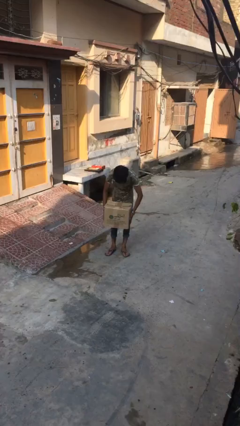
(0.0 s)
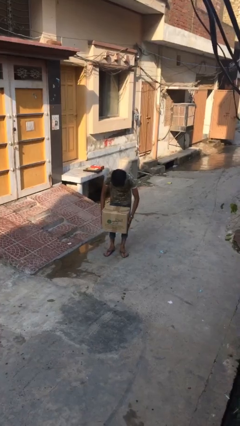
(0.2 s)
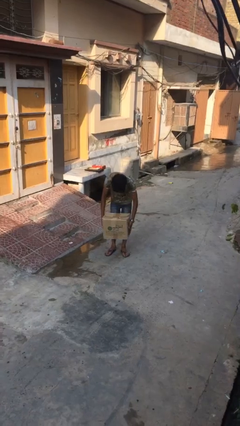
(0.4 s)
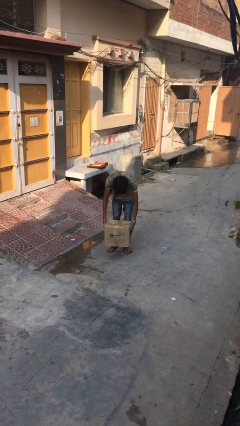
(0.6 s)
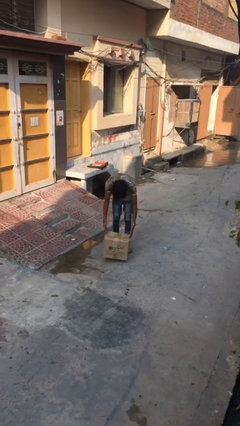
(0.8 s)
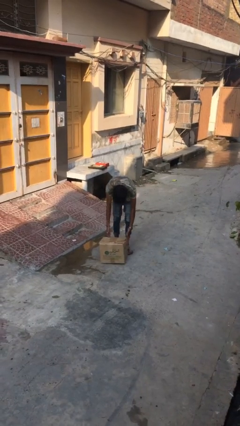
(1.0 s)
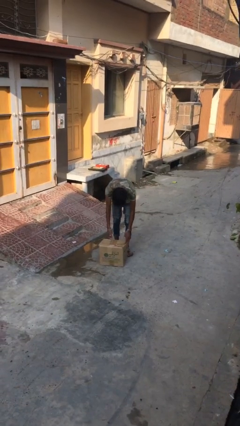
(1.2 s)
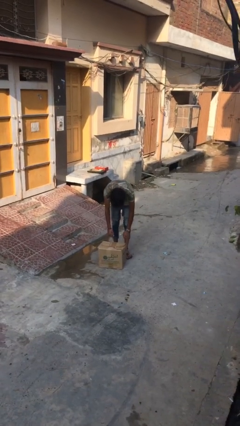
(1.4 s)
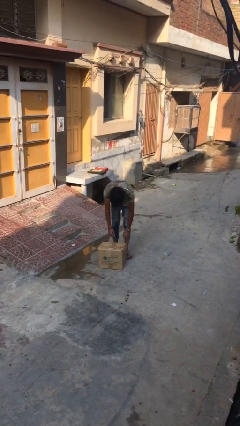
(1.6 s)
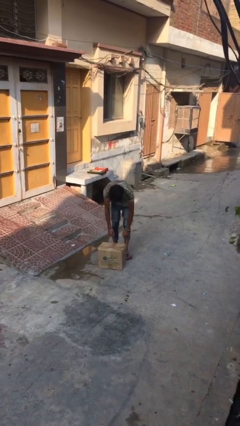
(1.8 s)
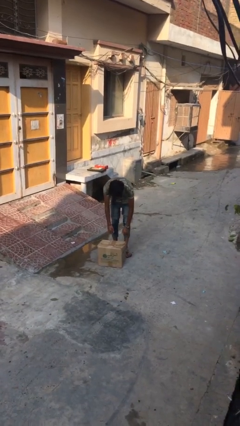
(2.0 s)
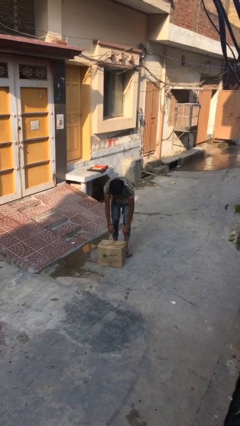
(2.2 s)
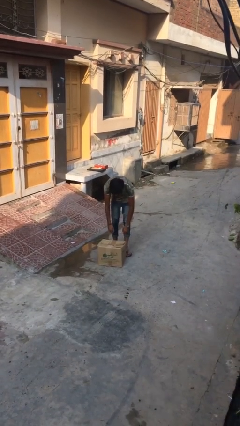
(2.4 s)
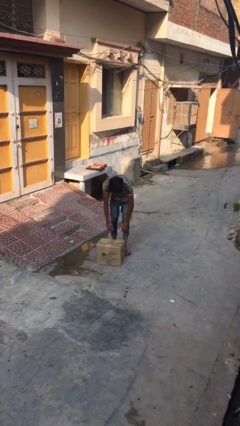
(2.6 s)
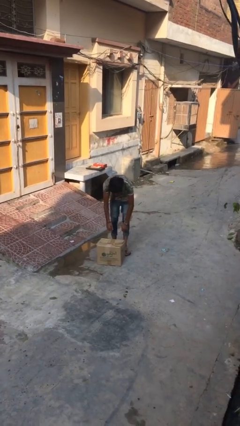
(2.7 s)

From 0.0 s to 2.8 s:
person puts down object on floor

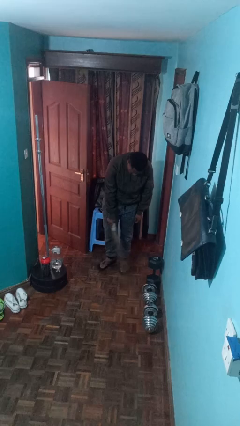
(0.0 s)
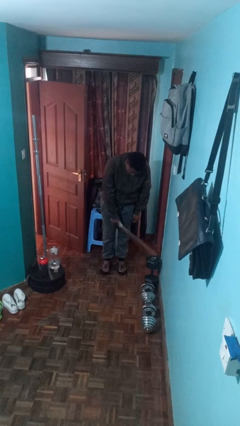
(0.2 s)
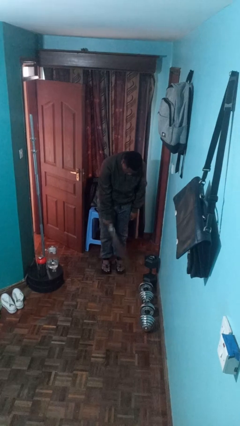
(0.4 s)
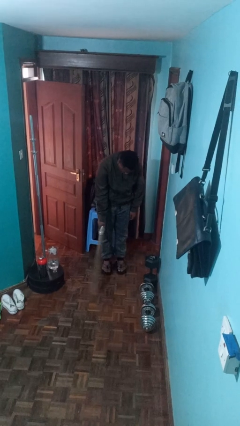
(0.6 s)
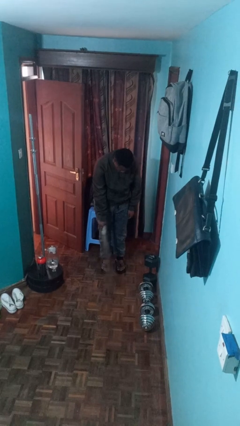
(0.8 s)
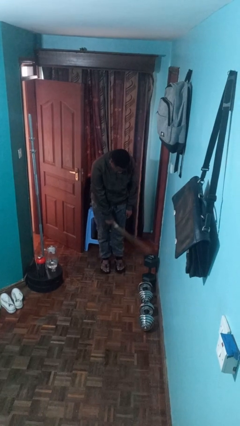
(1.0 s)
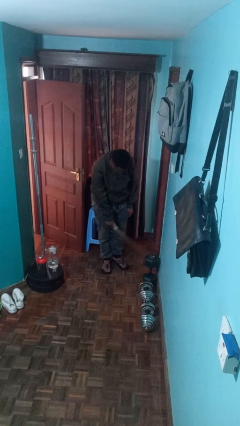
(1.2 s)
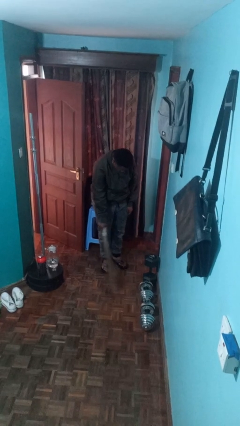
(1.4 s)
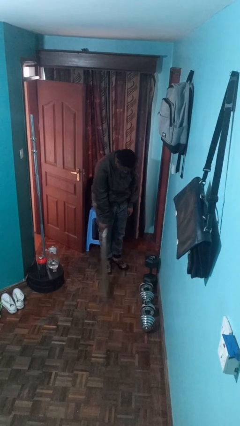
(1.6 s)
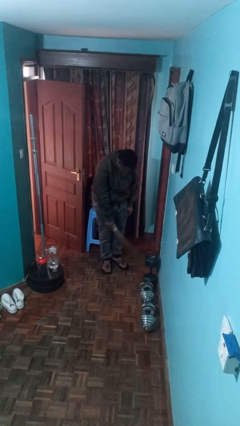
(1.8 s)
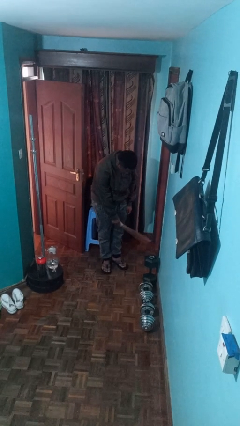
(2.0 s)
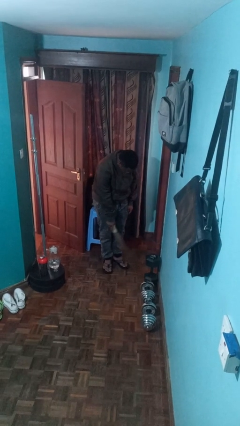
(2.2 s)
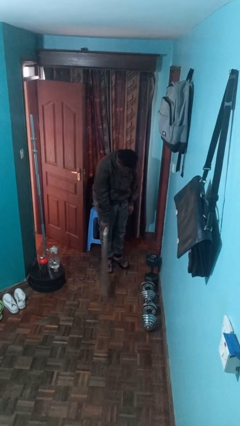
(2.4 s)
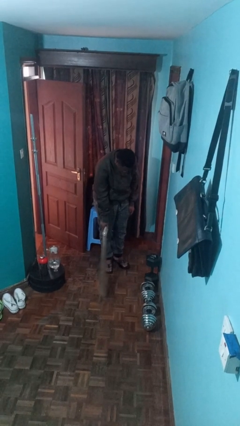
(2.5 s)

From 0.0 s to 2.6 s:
person sweeps floor

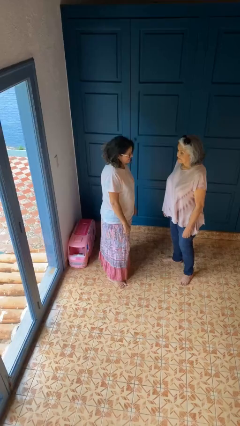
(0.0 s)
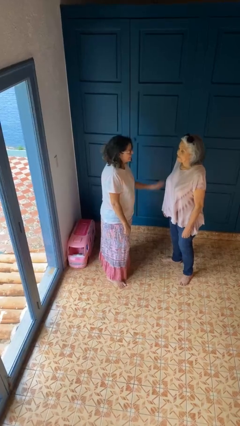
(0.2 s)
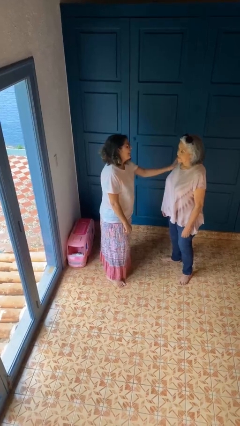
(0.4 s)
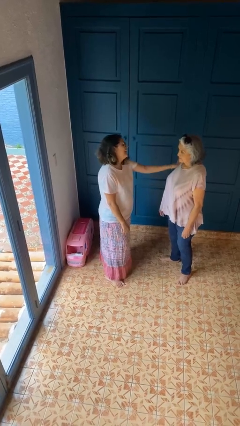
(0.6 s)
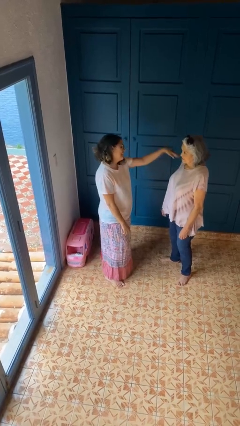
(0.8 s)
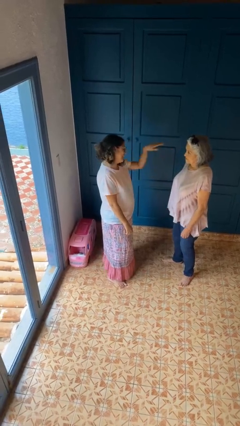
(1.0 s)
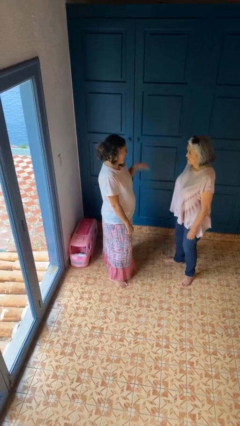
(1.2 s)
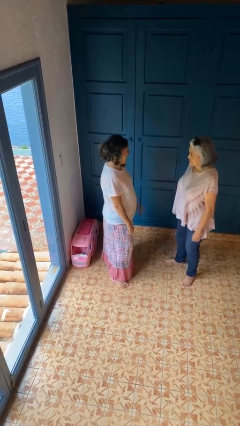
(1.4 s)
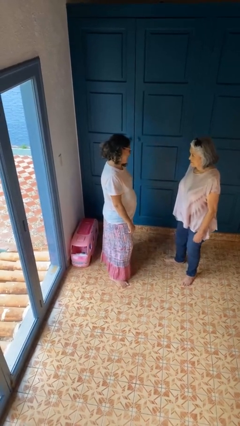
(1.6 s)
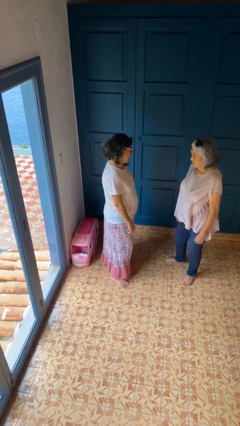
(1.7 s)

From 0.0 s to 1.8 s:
person shoves person

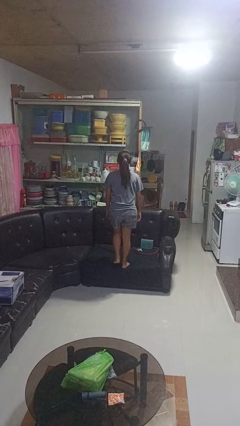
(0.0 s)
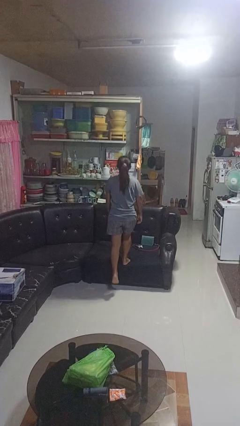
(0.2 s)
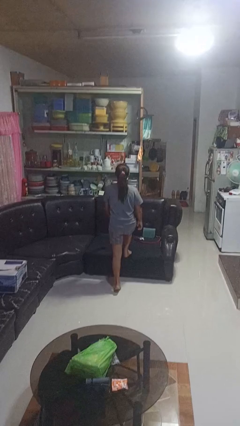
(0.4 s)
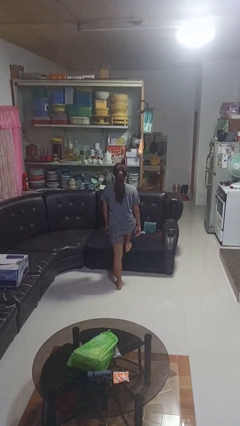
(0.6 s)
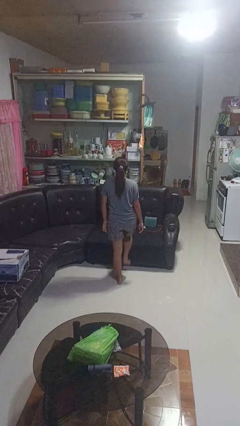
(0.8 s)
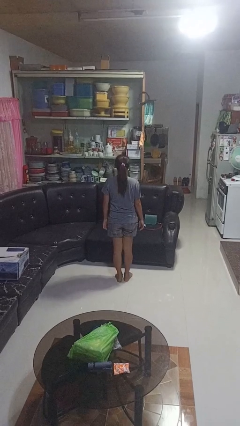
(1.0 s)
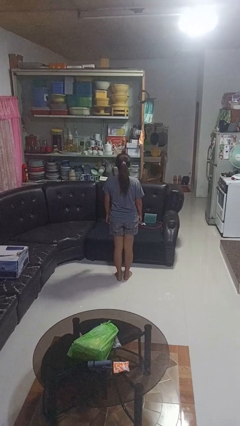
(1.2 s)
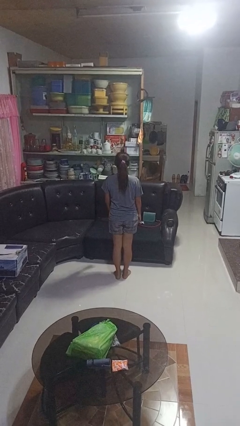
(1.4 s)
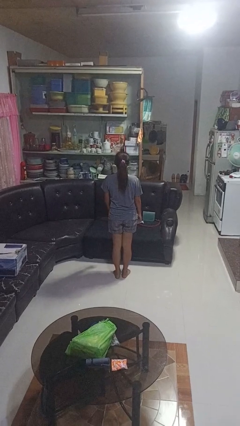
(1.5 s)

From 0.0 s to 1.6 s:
person climbs off couch

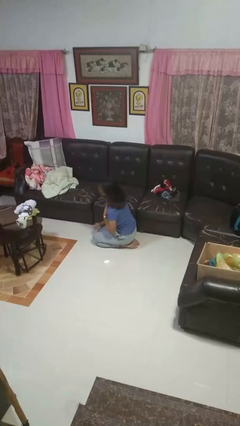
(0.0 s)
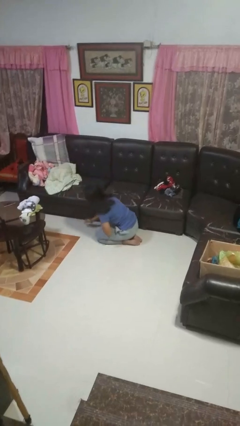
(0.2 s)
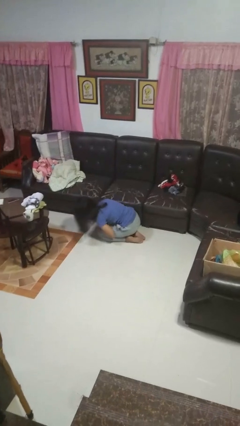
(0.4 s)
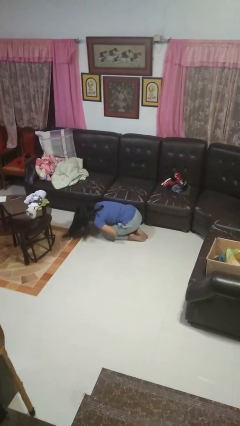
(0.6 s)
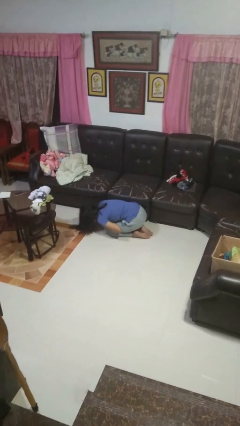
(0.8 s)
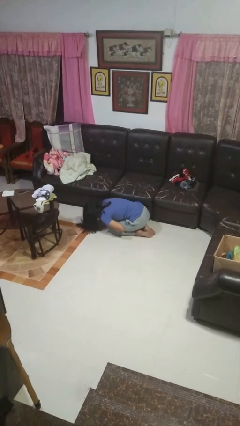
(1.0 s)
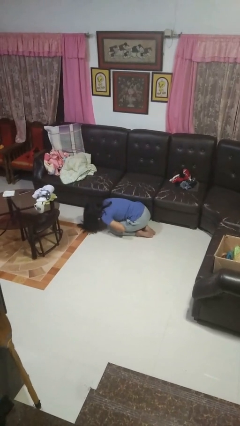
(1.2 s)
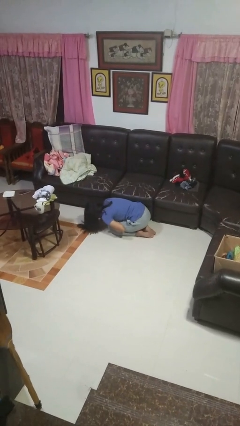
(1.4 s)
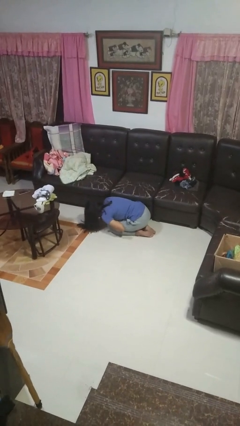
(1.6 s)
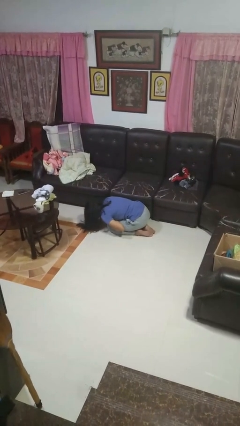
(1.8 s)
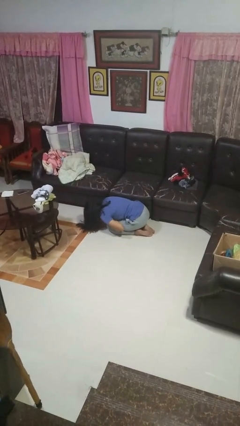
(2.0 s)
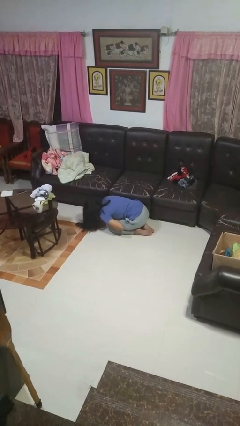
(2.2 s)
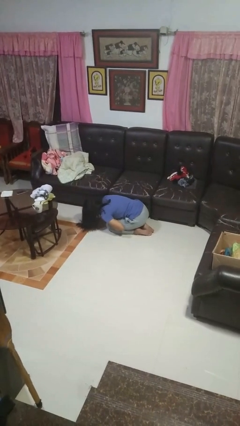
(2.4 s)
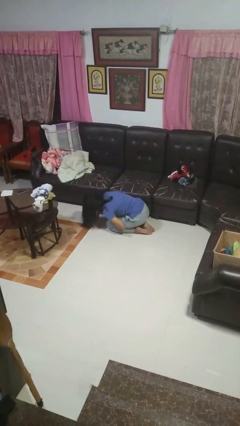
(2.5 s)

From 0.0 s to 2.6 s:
person searches under couch

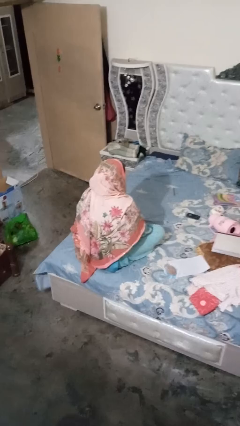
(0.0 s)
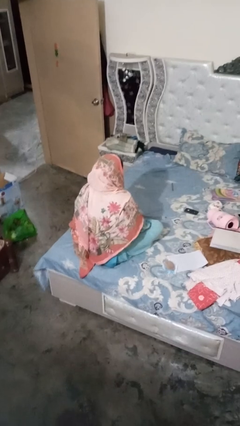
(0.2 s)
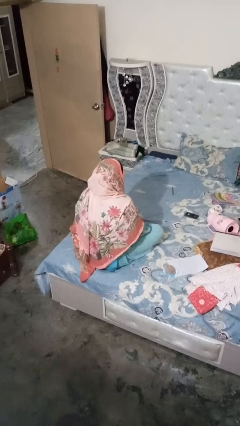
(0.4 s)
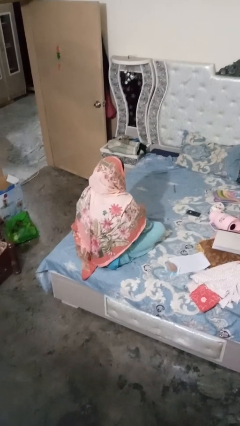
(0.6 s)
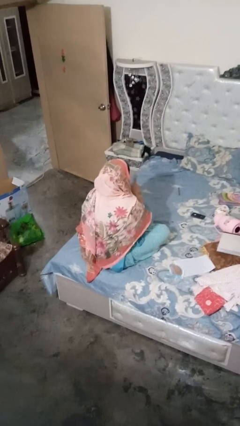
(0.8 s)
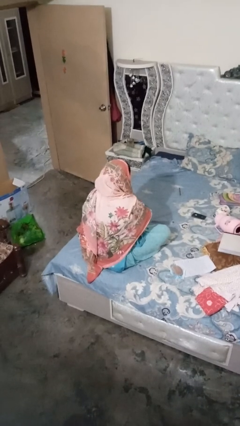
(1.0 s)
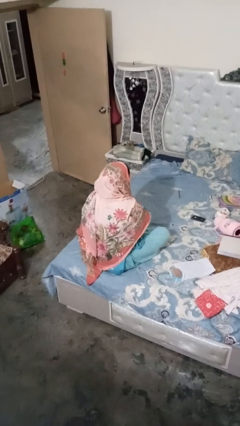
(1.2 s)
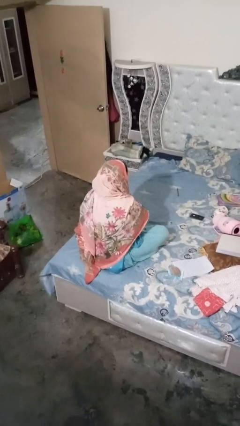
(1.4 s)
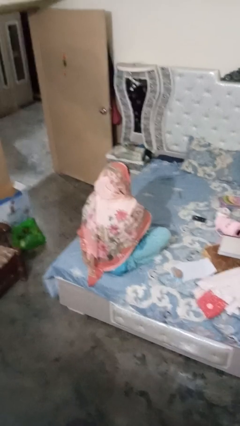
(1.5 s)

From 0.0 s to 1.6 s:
person gestures be quiet

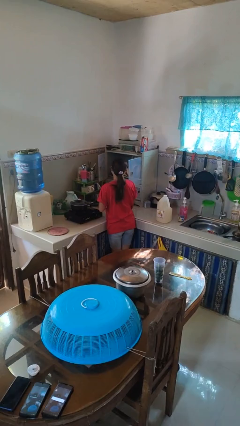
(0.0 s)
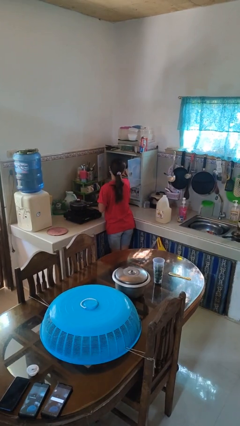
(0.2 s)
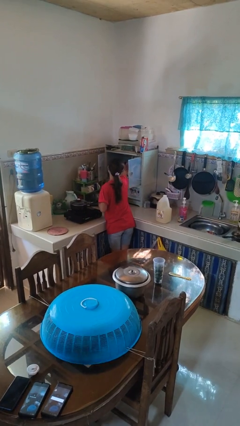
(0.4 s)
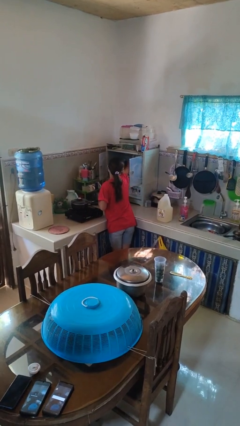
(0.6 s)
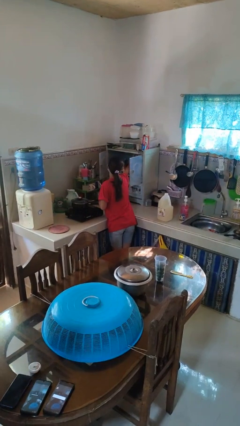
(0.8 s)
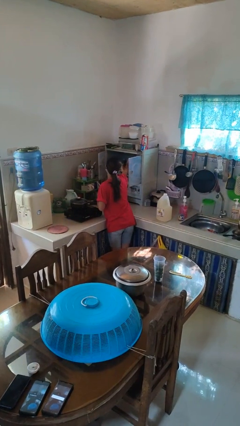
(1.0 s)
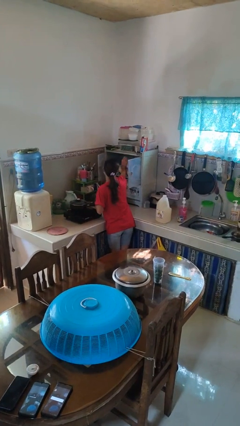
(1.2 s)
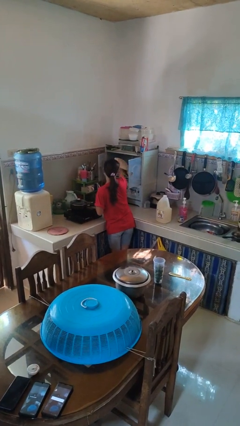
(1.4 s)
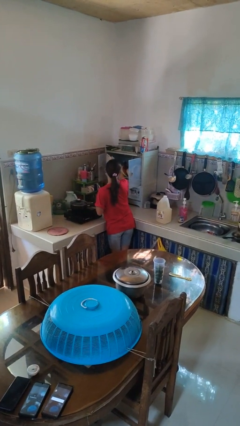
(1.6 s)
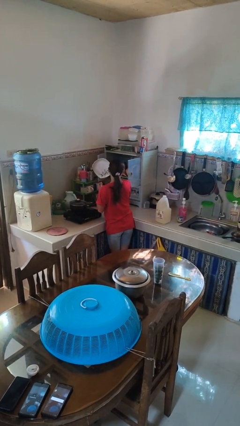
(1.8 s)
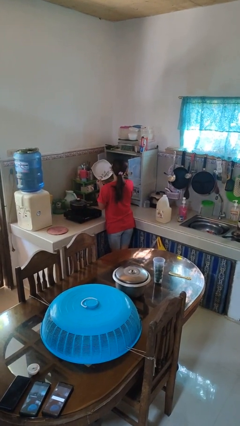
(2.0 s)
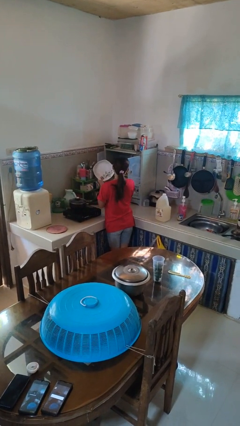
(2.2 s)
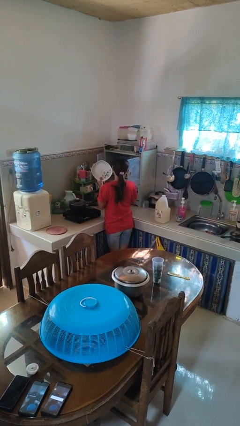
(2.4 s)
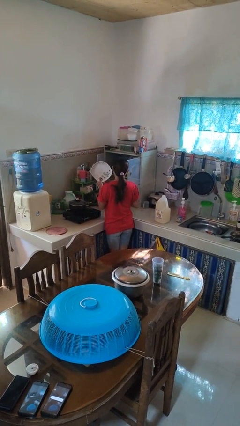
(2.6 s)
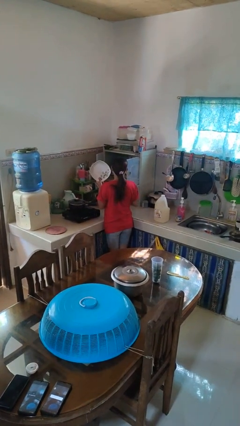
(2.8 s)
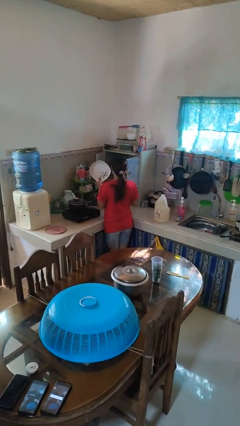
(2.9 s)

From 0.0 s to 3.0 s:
person takes object from cabinet

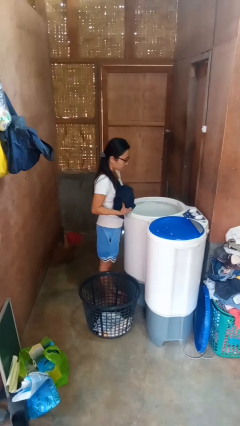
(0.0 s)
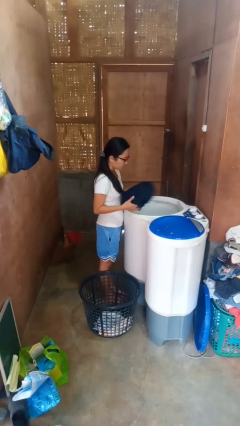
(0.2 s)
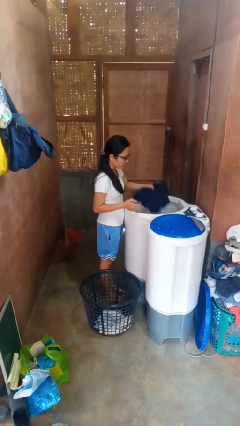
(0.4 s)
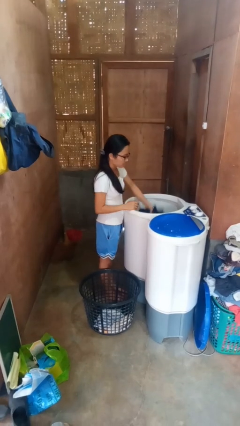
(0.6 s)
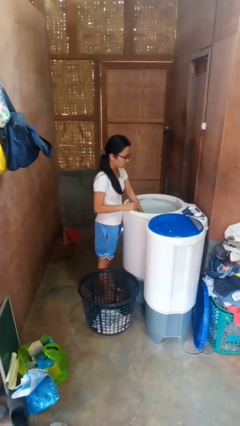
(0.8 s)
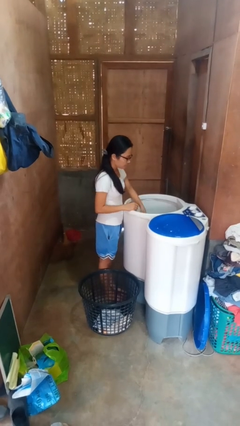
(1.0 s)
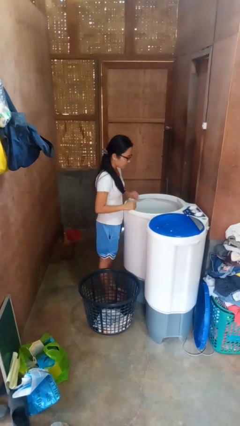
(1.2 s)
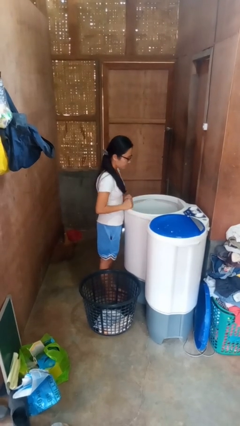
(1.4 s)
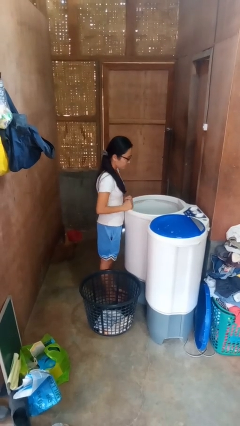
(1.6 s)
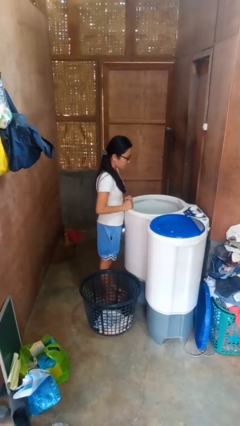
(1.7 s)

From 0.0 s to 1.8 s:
person loads clotheswasher
